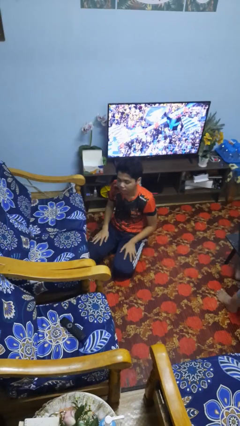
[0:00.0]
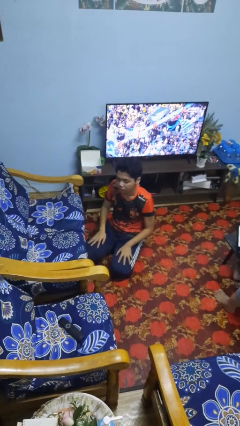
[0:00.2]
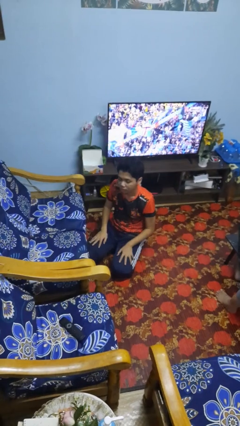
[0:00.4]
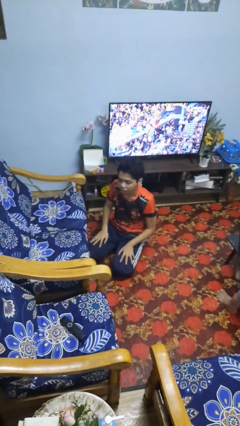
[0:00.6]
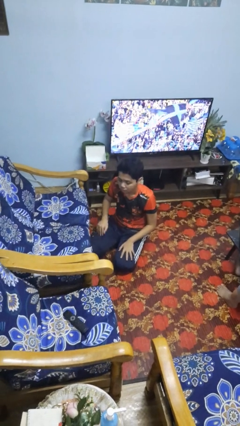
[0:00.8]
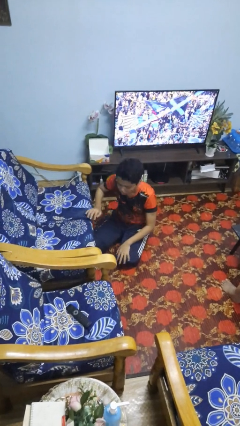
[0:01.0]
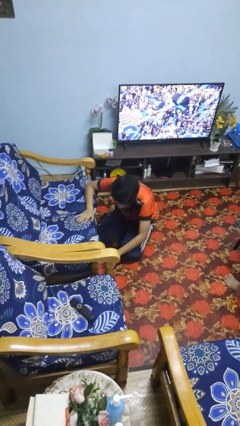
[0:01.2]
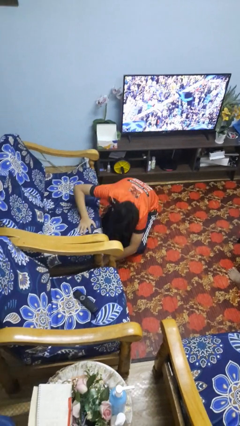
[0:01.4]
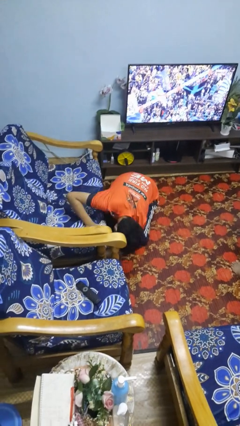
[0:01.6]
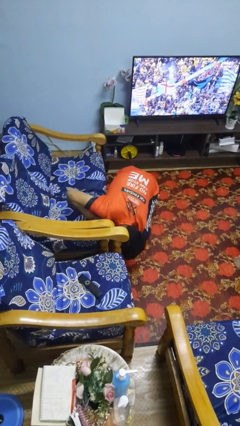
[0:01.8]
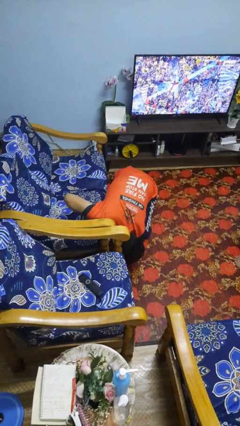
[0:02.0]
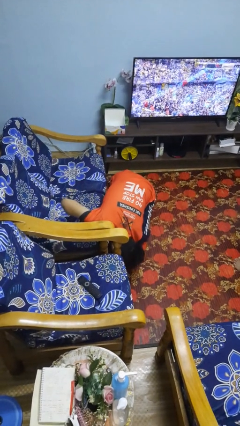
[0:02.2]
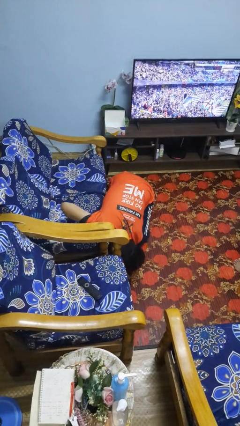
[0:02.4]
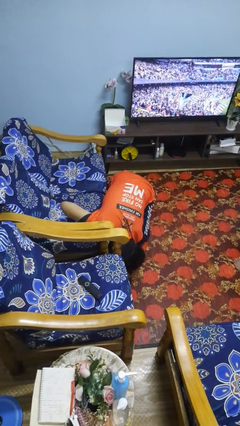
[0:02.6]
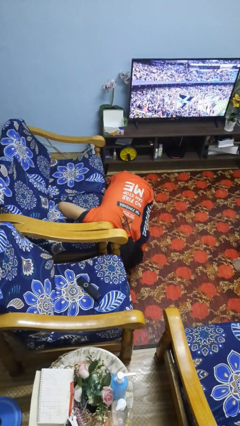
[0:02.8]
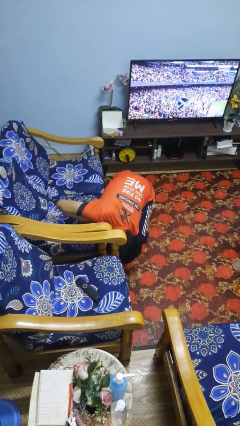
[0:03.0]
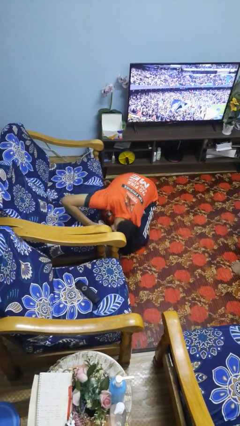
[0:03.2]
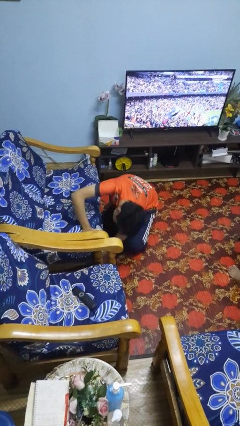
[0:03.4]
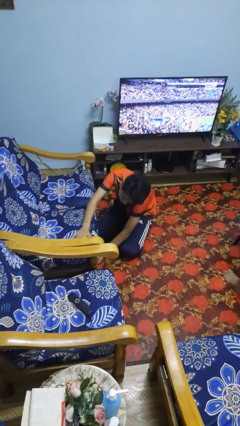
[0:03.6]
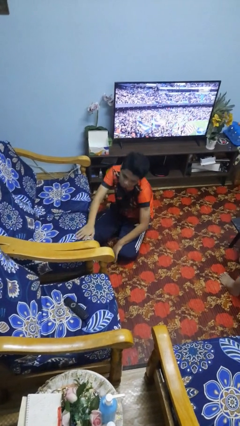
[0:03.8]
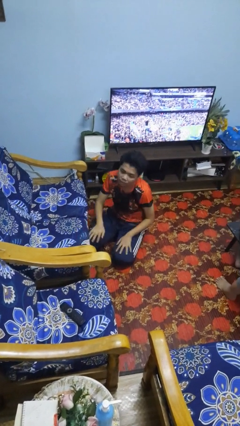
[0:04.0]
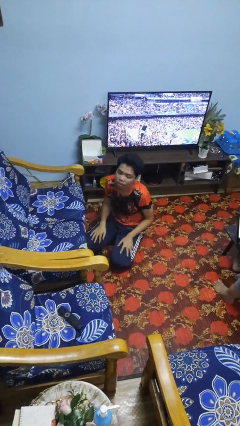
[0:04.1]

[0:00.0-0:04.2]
person searches under couch

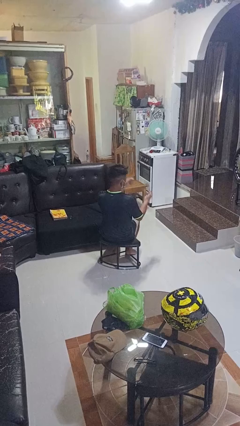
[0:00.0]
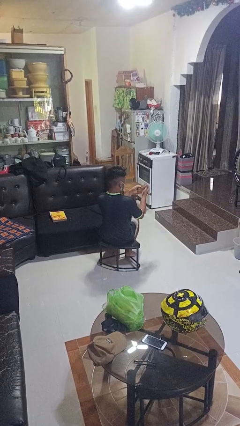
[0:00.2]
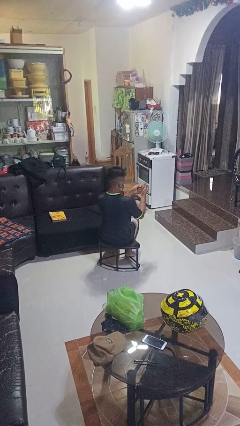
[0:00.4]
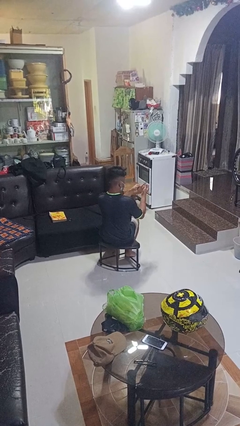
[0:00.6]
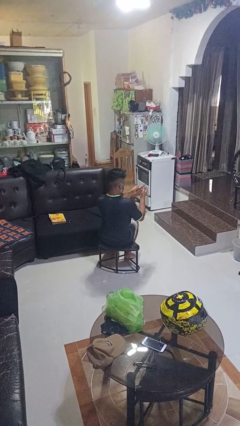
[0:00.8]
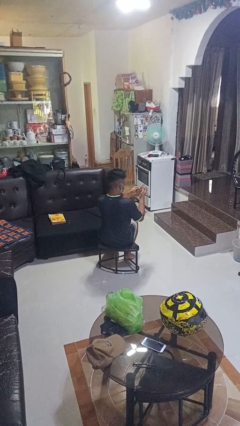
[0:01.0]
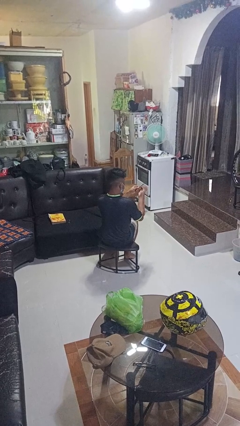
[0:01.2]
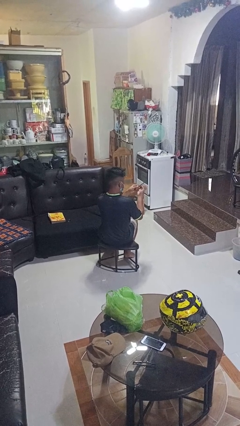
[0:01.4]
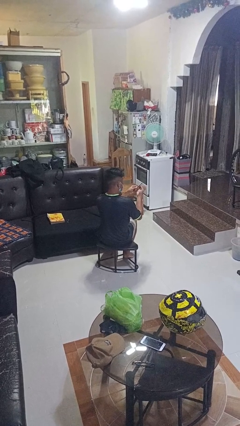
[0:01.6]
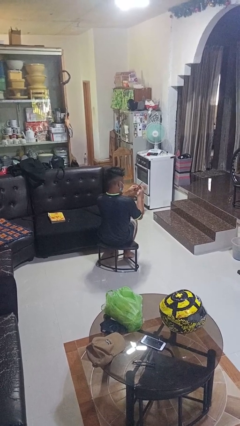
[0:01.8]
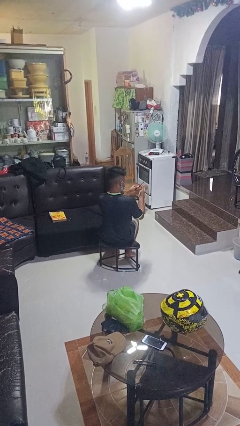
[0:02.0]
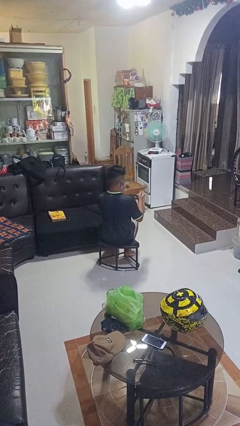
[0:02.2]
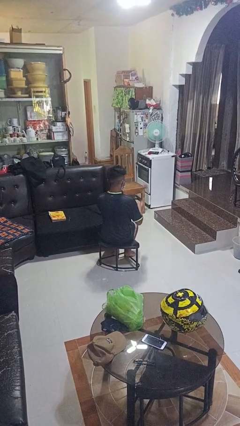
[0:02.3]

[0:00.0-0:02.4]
person files fingernails

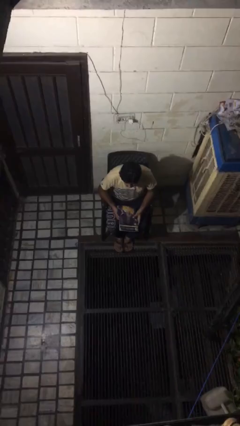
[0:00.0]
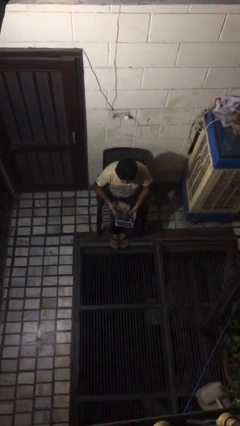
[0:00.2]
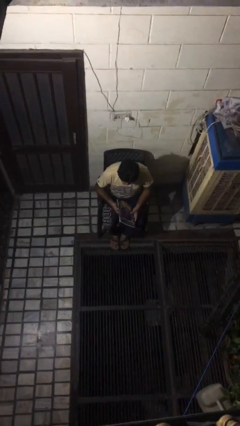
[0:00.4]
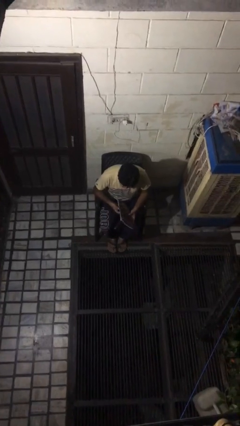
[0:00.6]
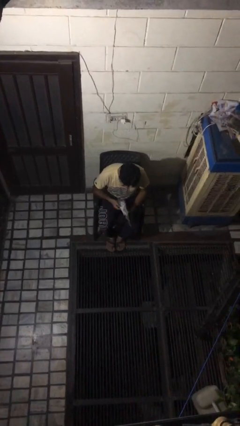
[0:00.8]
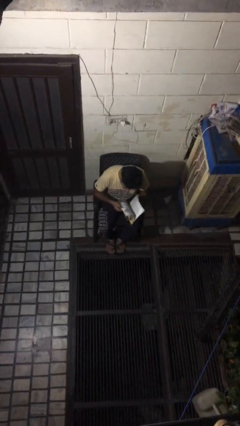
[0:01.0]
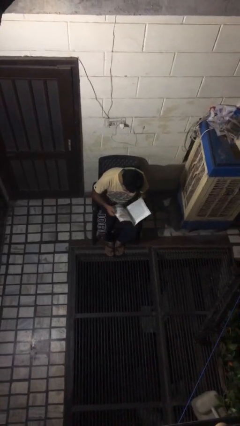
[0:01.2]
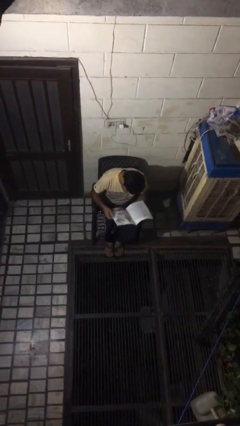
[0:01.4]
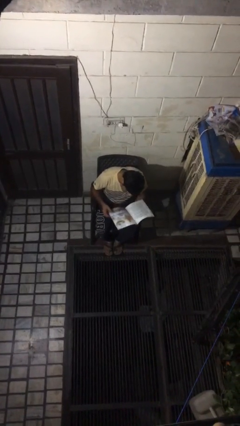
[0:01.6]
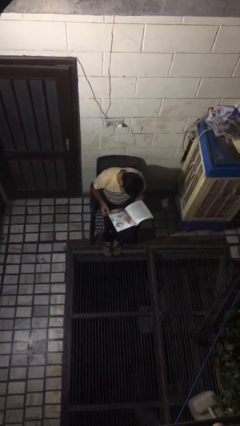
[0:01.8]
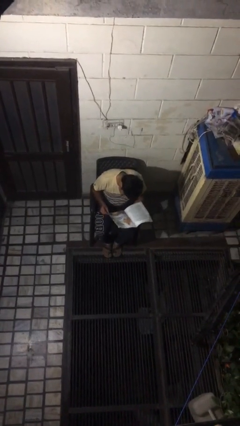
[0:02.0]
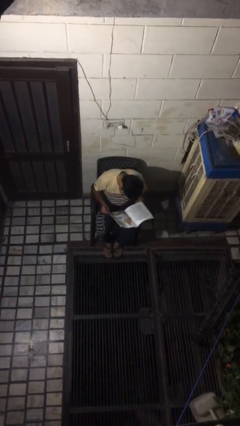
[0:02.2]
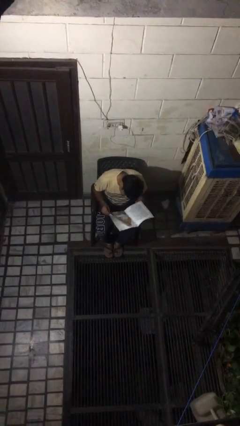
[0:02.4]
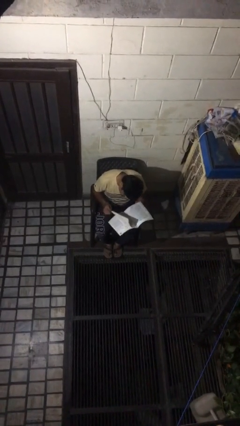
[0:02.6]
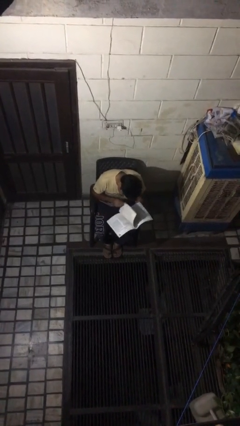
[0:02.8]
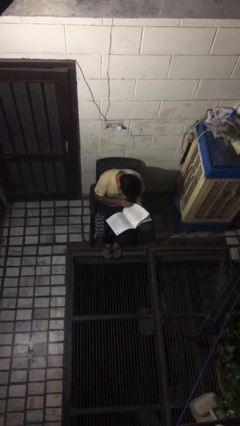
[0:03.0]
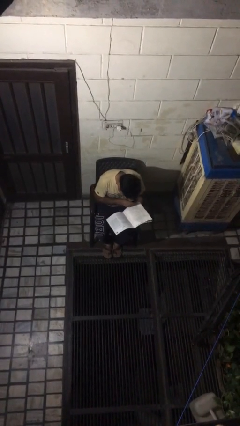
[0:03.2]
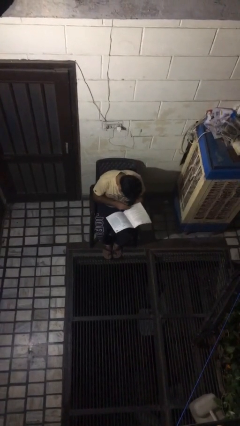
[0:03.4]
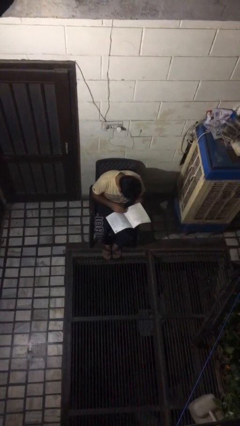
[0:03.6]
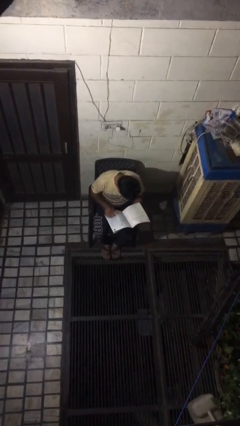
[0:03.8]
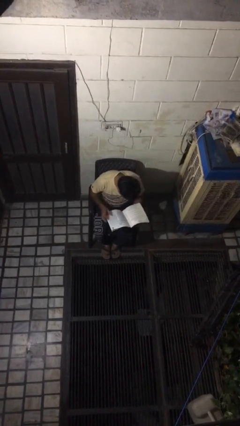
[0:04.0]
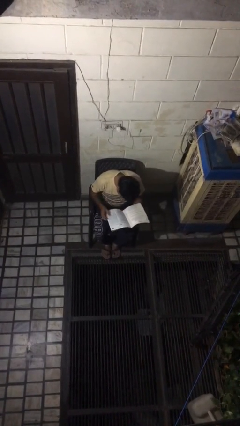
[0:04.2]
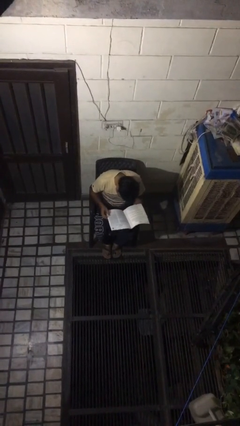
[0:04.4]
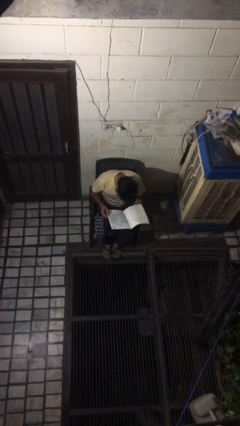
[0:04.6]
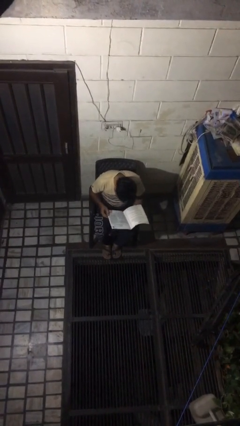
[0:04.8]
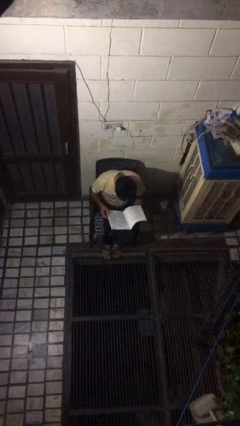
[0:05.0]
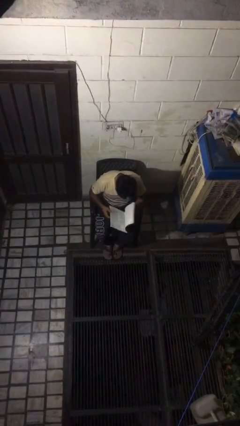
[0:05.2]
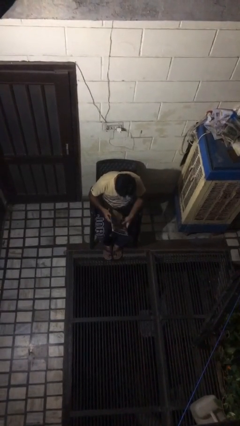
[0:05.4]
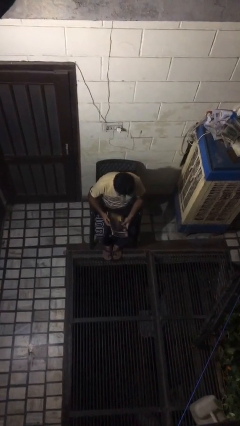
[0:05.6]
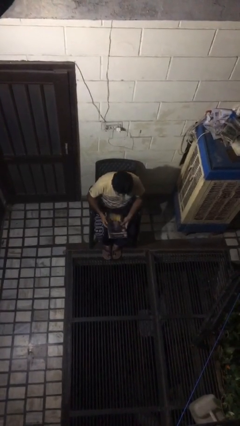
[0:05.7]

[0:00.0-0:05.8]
person reads magazine

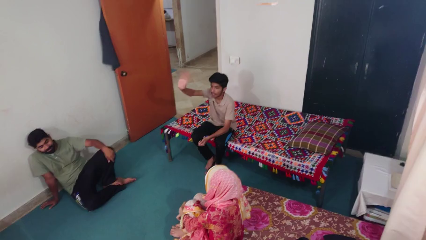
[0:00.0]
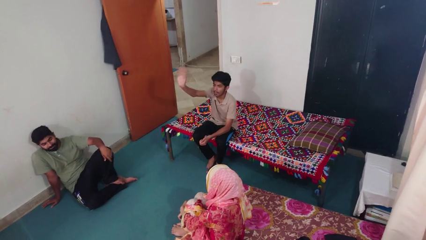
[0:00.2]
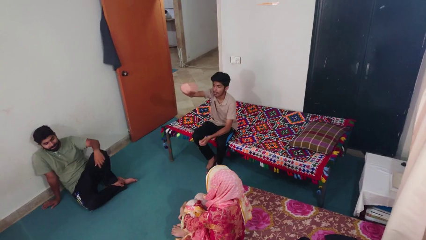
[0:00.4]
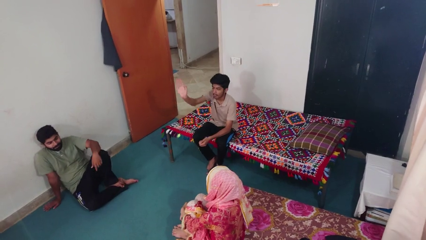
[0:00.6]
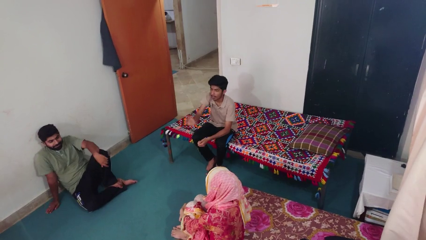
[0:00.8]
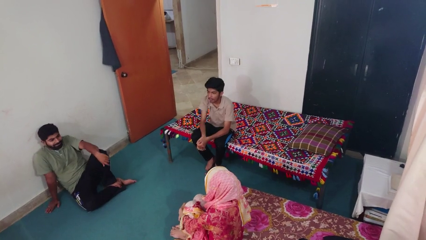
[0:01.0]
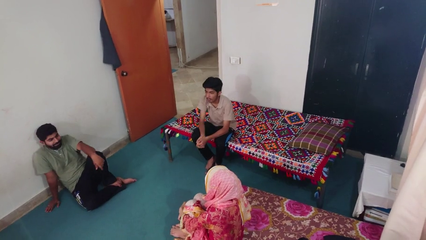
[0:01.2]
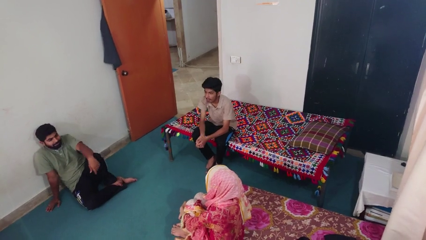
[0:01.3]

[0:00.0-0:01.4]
person waves at person

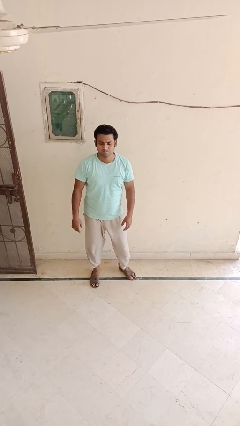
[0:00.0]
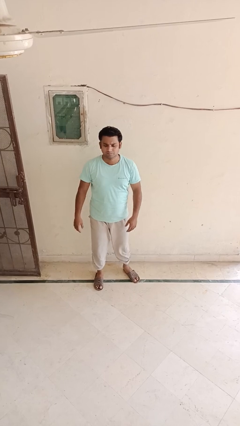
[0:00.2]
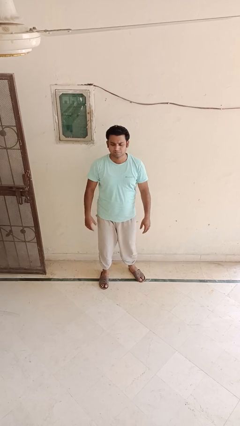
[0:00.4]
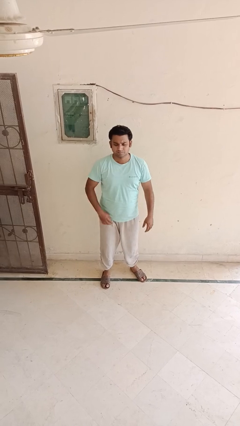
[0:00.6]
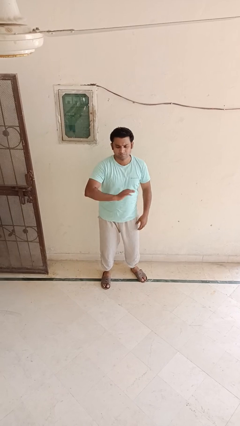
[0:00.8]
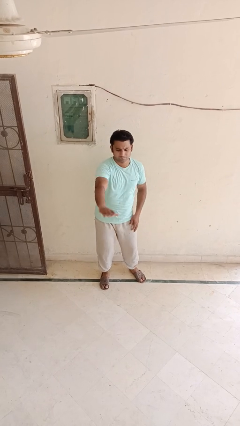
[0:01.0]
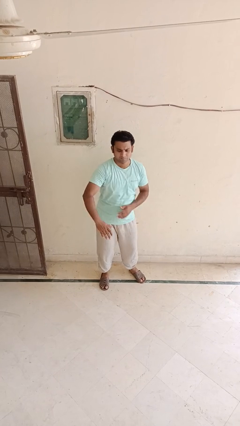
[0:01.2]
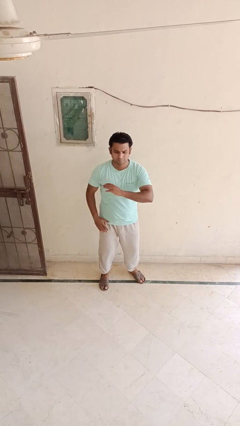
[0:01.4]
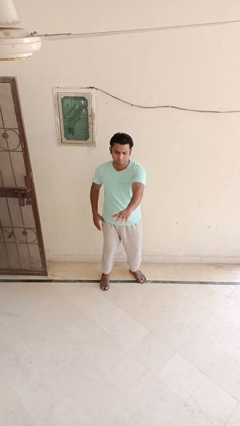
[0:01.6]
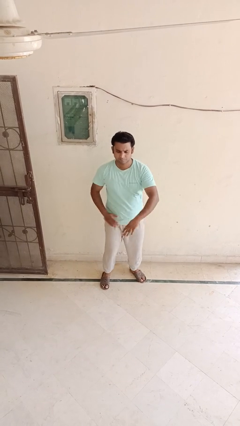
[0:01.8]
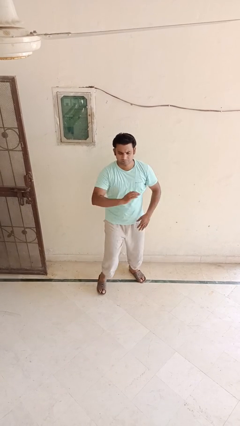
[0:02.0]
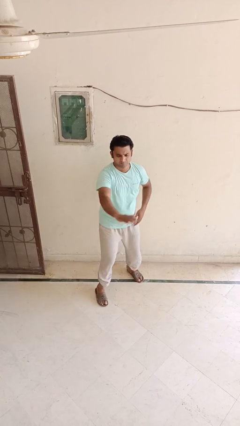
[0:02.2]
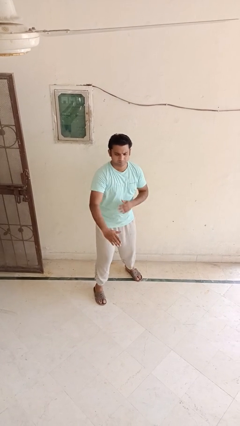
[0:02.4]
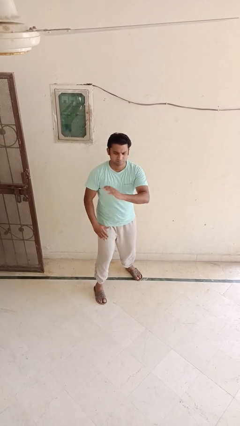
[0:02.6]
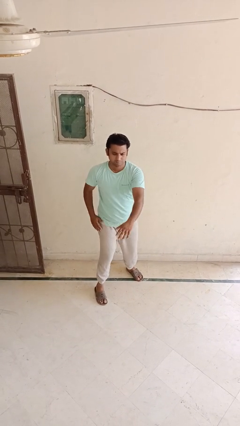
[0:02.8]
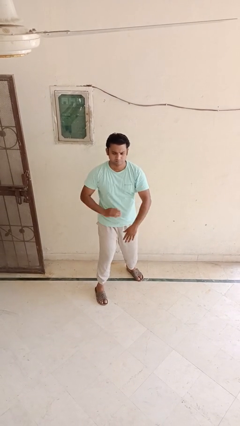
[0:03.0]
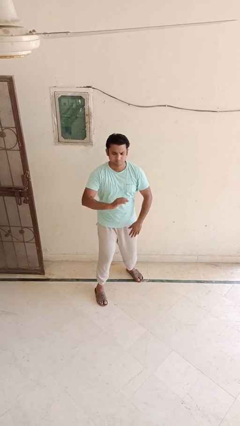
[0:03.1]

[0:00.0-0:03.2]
person karate chop

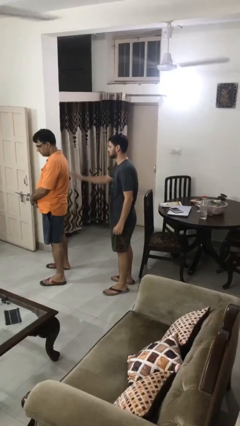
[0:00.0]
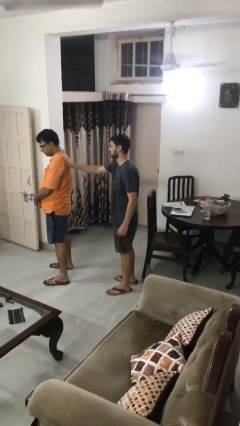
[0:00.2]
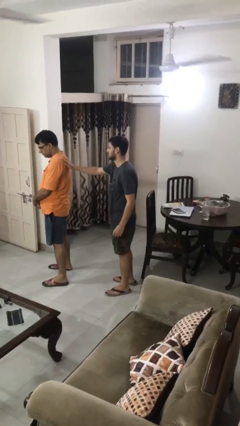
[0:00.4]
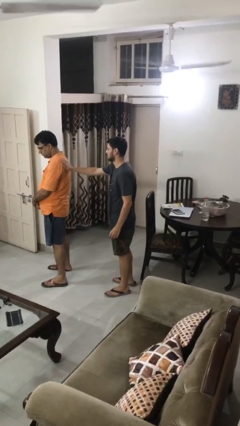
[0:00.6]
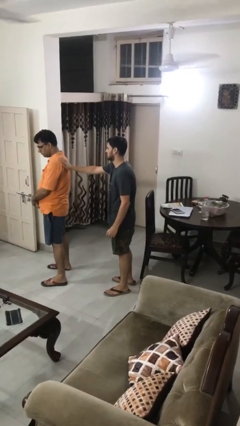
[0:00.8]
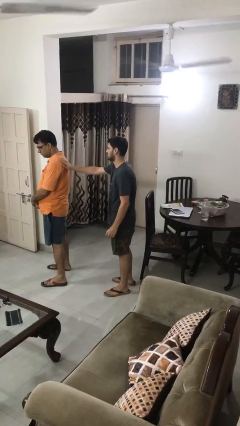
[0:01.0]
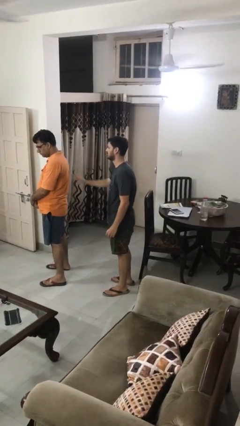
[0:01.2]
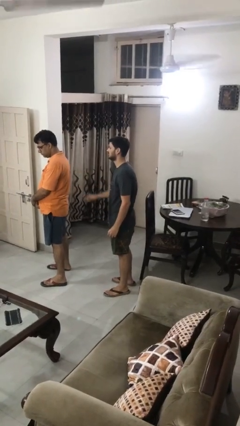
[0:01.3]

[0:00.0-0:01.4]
person touches back of person
